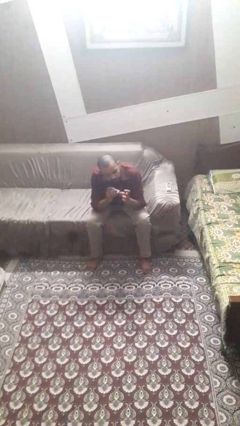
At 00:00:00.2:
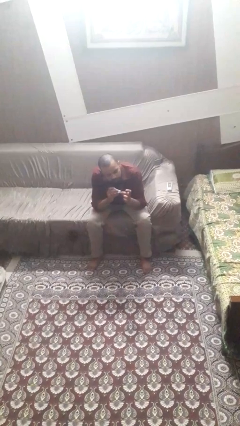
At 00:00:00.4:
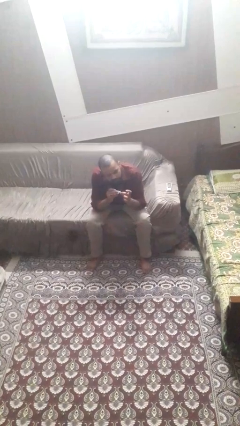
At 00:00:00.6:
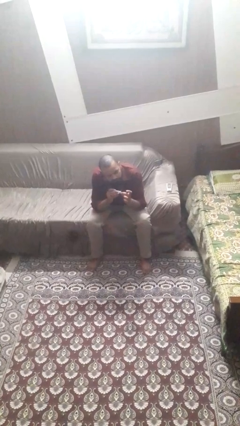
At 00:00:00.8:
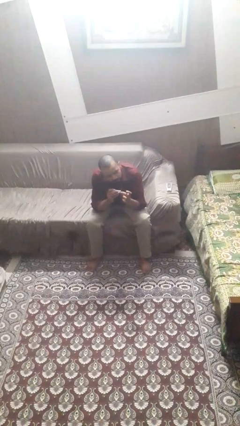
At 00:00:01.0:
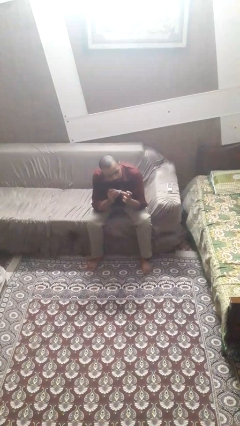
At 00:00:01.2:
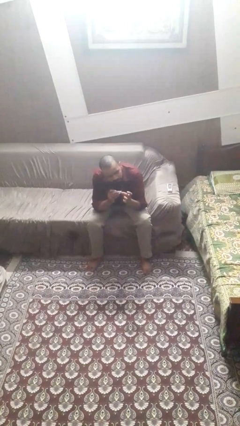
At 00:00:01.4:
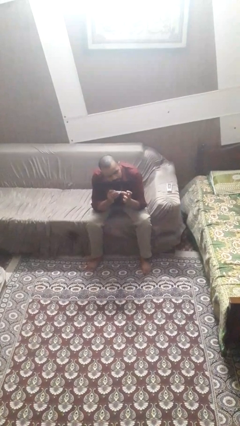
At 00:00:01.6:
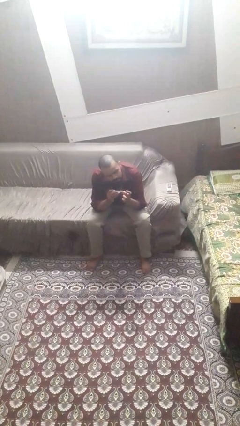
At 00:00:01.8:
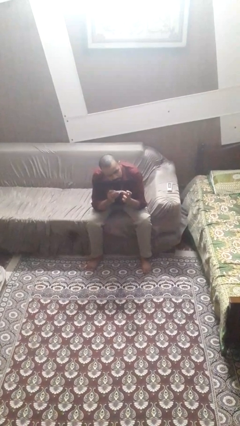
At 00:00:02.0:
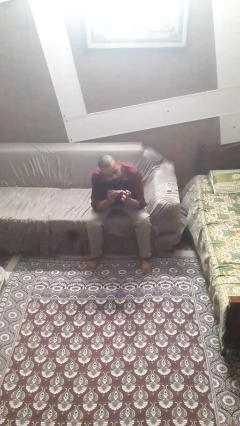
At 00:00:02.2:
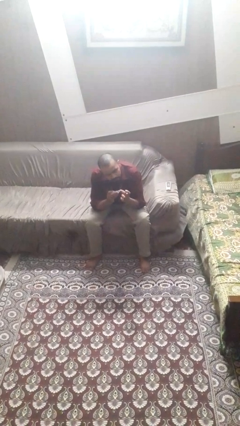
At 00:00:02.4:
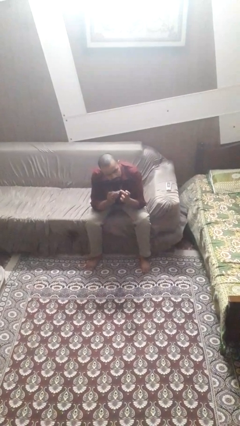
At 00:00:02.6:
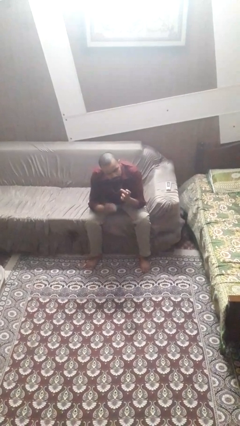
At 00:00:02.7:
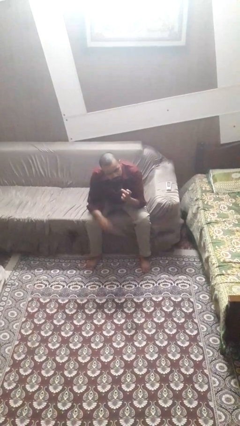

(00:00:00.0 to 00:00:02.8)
person clips fingernails

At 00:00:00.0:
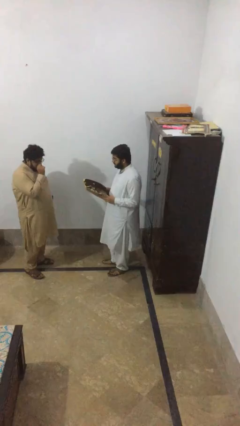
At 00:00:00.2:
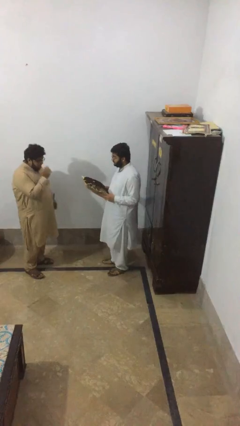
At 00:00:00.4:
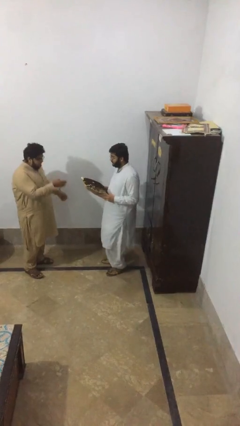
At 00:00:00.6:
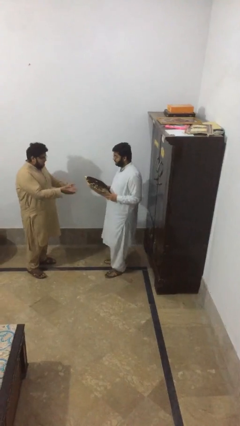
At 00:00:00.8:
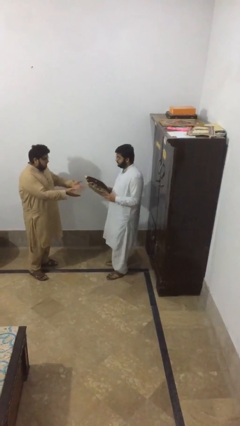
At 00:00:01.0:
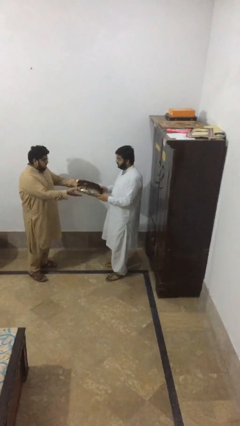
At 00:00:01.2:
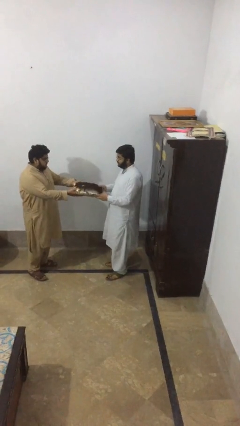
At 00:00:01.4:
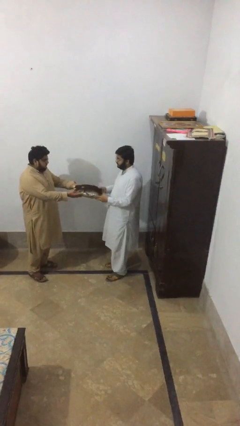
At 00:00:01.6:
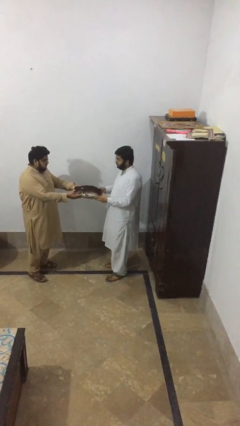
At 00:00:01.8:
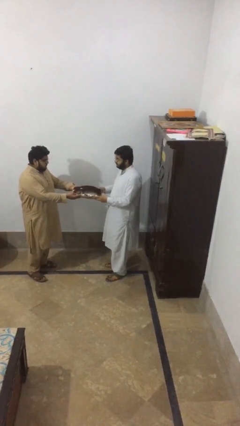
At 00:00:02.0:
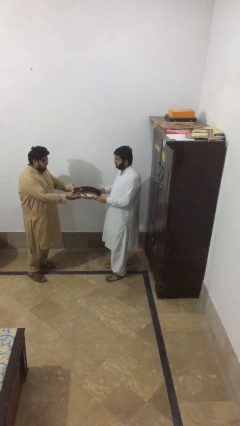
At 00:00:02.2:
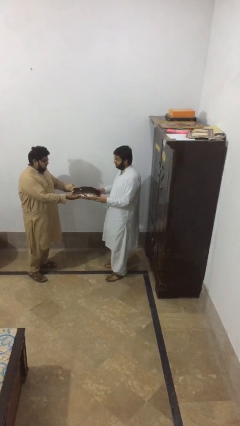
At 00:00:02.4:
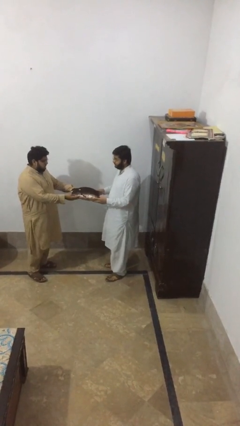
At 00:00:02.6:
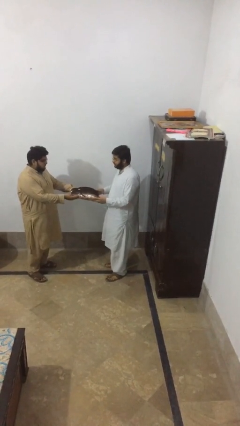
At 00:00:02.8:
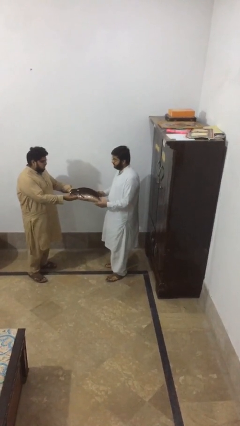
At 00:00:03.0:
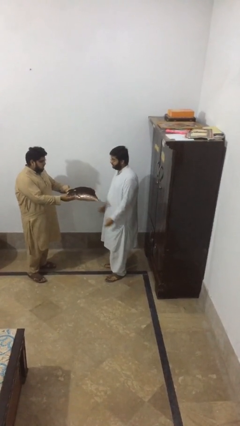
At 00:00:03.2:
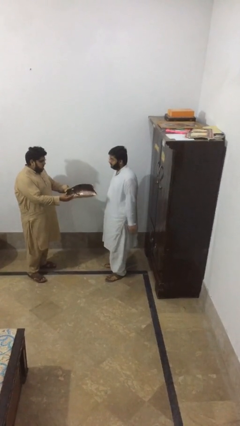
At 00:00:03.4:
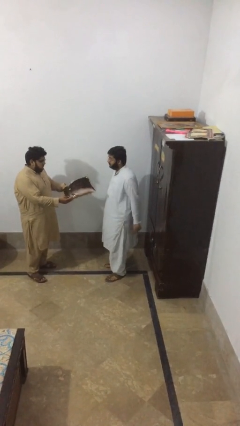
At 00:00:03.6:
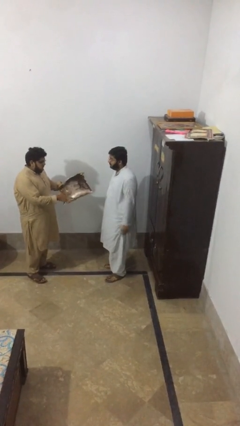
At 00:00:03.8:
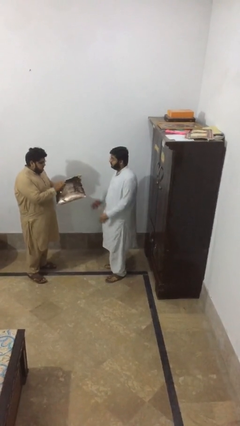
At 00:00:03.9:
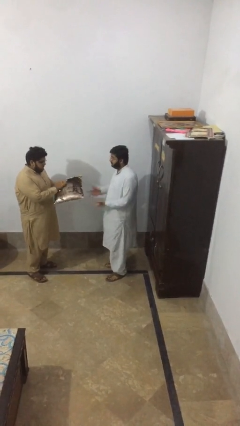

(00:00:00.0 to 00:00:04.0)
person transfers object to person

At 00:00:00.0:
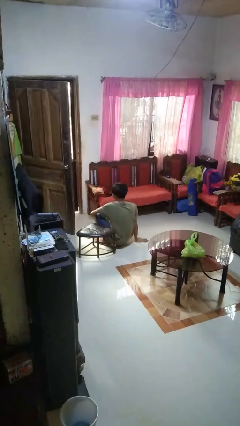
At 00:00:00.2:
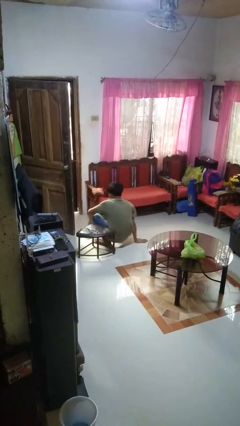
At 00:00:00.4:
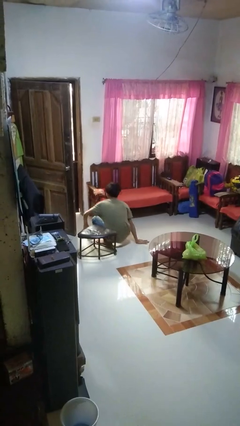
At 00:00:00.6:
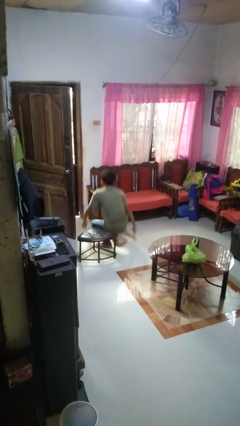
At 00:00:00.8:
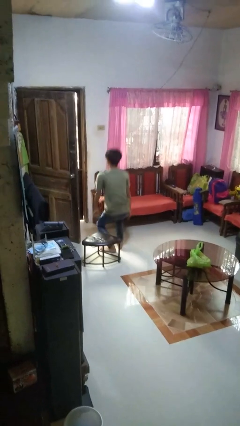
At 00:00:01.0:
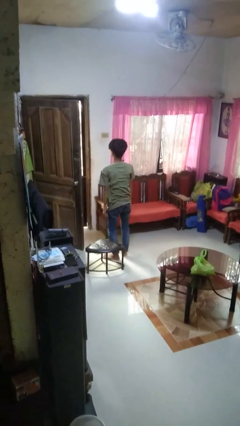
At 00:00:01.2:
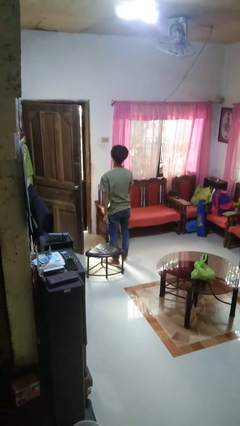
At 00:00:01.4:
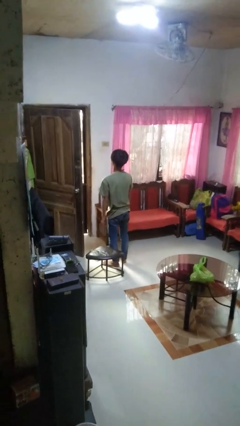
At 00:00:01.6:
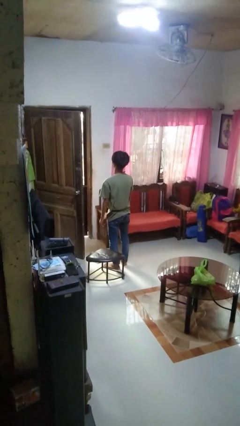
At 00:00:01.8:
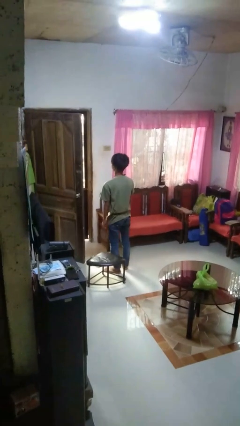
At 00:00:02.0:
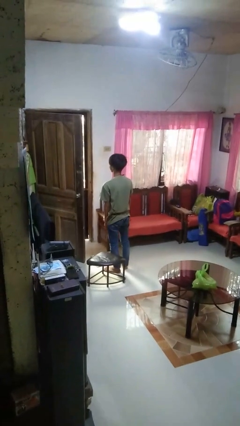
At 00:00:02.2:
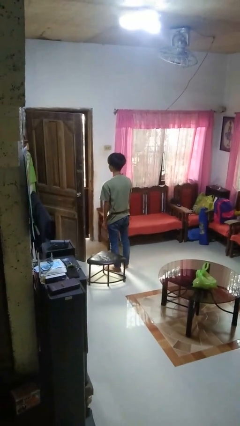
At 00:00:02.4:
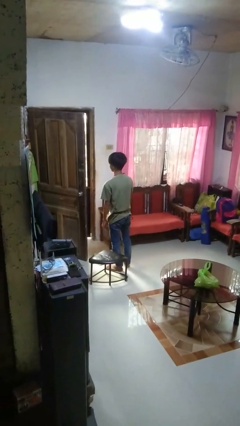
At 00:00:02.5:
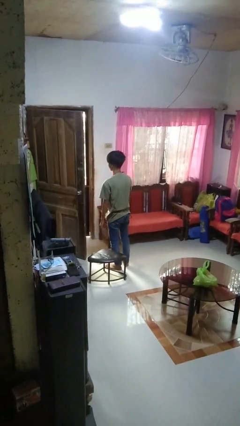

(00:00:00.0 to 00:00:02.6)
person stands up from floor

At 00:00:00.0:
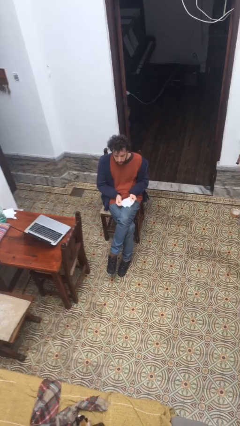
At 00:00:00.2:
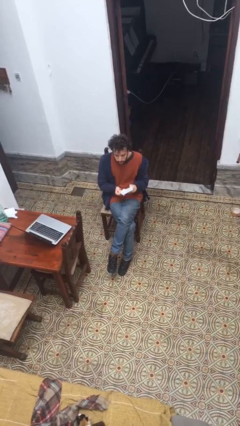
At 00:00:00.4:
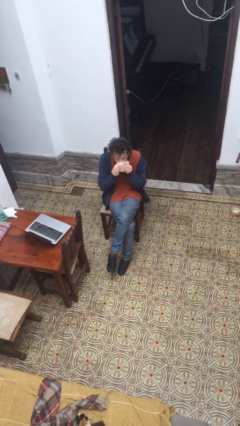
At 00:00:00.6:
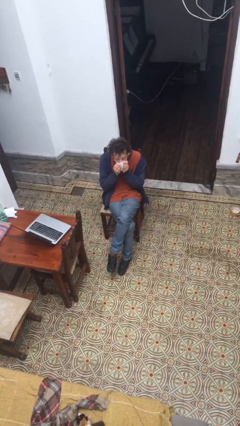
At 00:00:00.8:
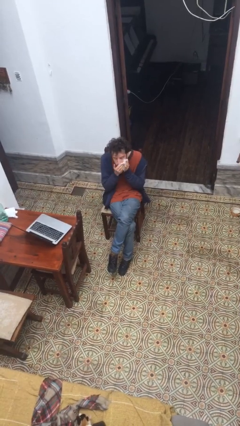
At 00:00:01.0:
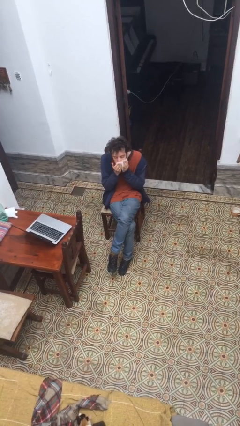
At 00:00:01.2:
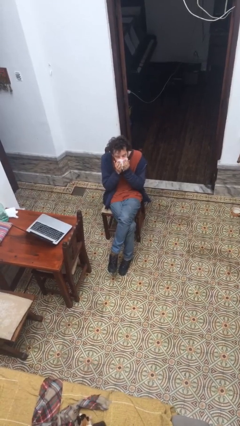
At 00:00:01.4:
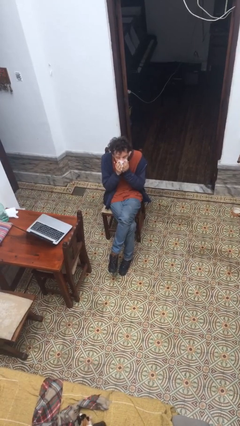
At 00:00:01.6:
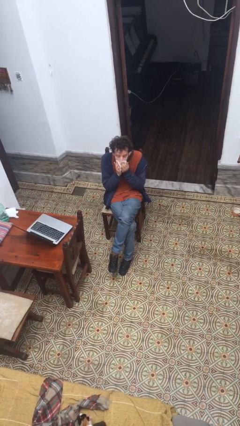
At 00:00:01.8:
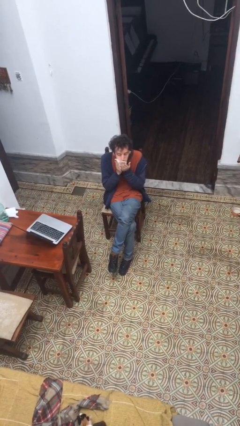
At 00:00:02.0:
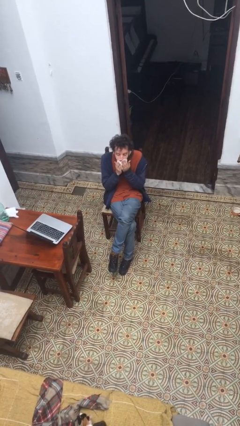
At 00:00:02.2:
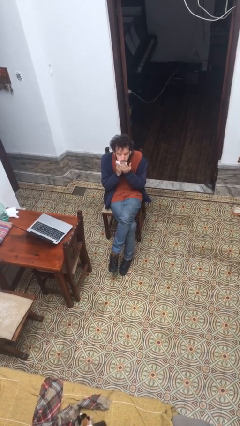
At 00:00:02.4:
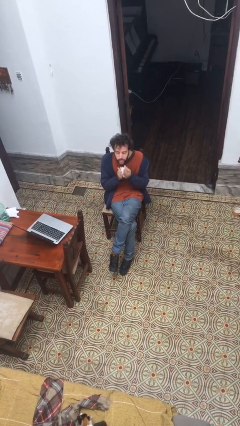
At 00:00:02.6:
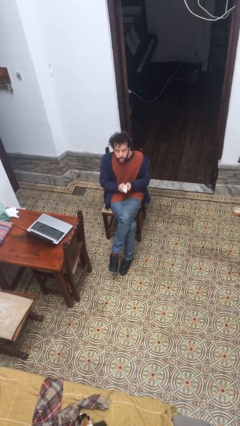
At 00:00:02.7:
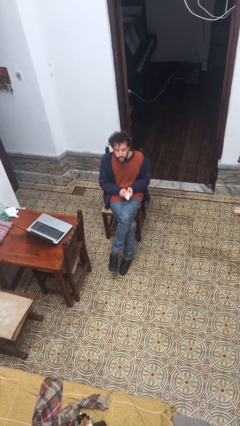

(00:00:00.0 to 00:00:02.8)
person wipes mouth with napkin

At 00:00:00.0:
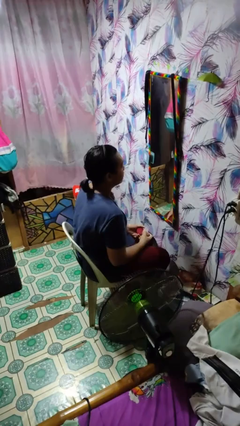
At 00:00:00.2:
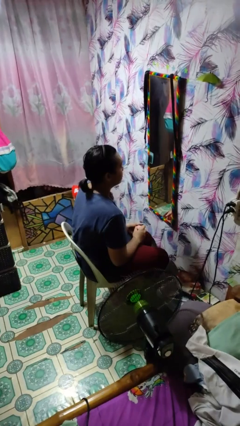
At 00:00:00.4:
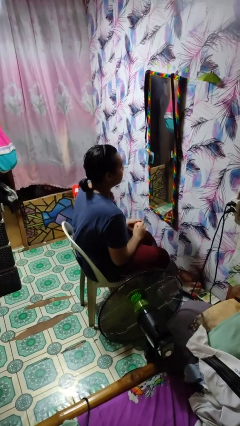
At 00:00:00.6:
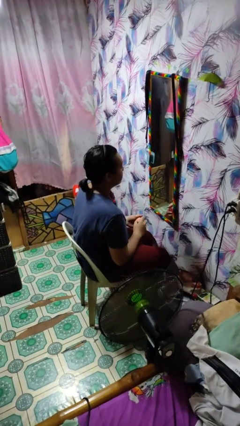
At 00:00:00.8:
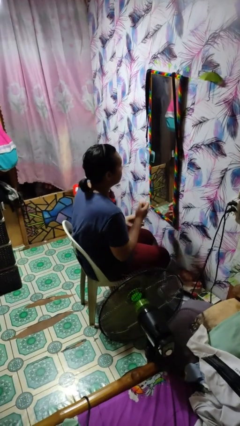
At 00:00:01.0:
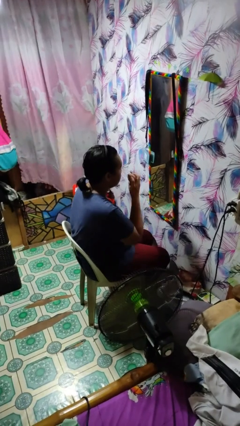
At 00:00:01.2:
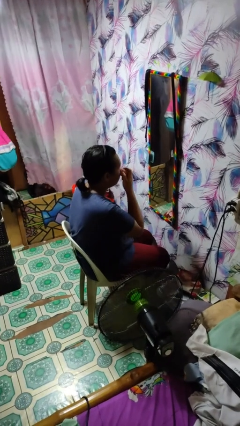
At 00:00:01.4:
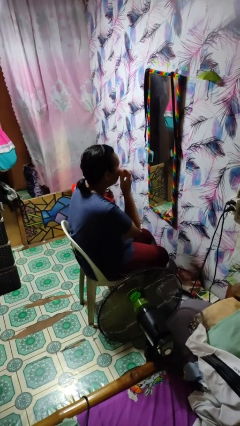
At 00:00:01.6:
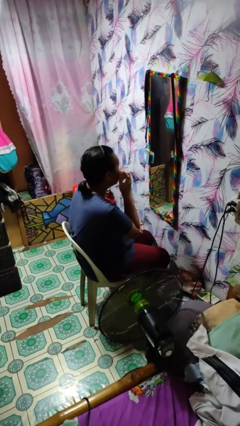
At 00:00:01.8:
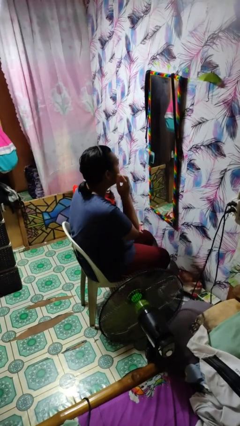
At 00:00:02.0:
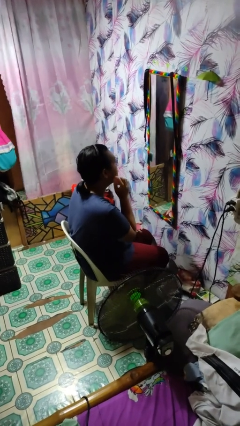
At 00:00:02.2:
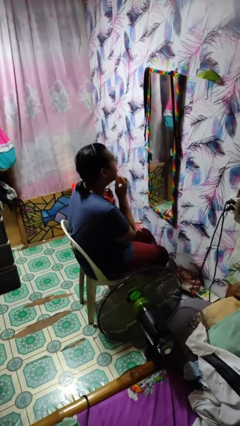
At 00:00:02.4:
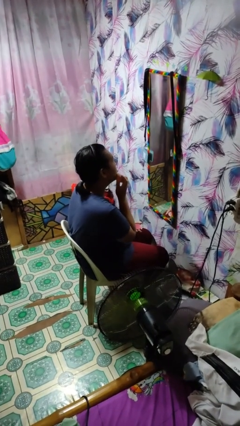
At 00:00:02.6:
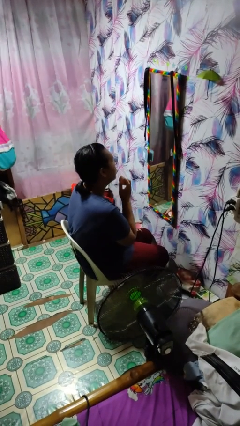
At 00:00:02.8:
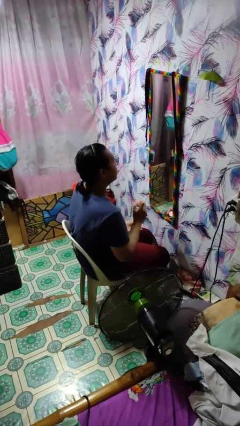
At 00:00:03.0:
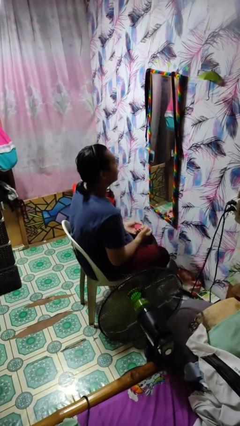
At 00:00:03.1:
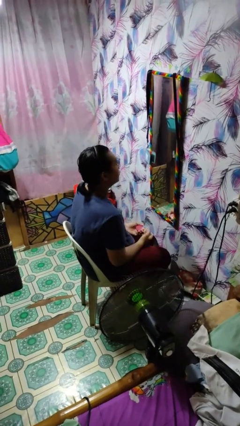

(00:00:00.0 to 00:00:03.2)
person applies foundation makeup

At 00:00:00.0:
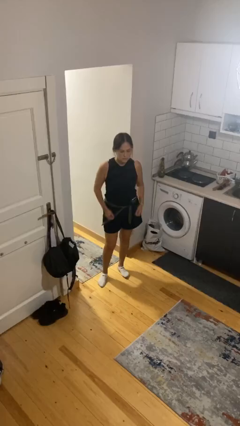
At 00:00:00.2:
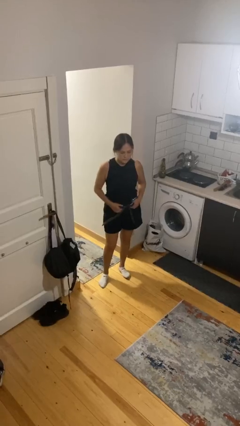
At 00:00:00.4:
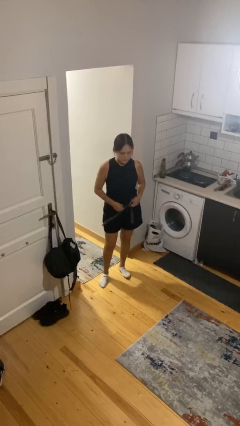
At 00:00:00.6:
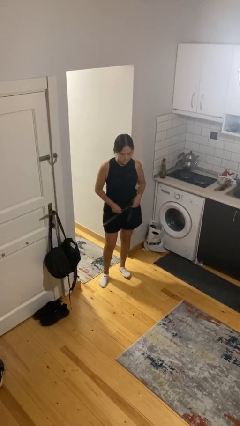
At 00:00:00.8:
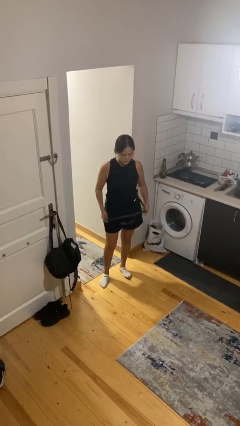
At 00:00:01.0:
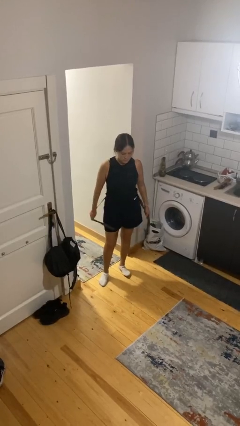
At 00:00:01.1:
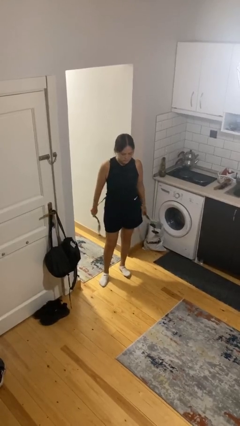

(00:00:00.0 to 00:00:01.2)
person puts on belt

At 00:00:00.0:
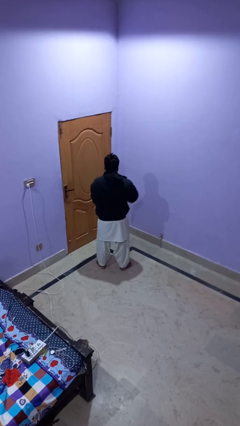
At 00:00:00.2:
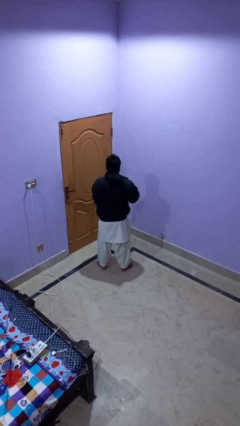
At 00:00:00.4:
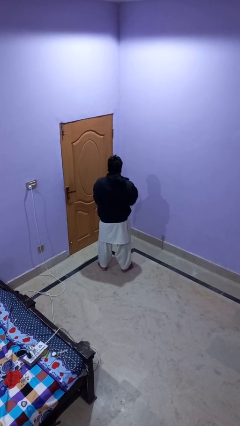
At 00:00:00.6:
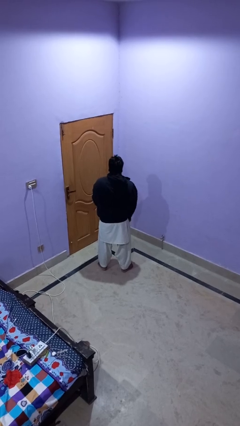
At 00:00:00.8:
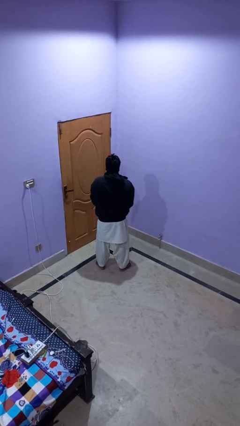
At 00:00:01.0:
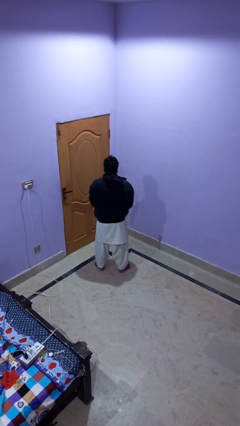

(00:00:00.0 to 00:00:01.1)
person unzips jacket
